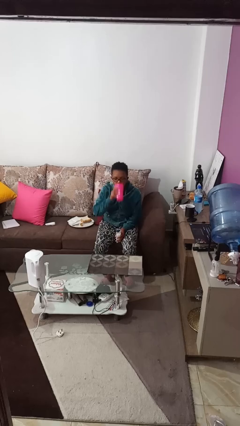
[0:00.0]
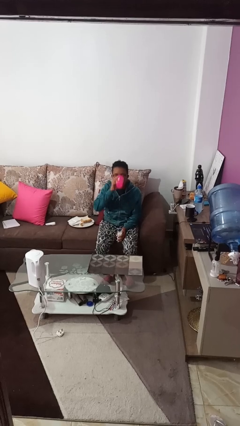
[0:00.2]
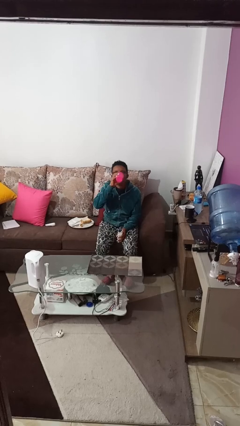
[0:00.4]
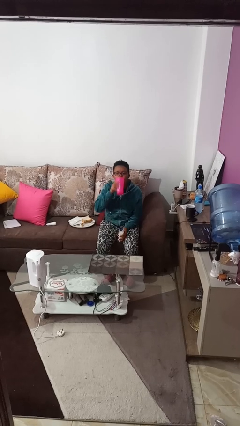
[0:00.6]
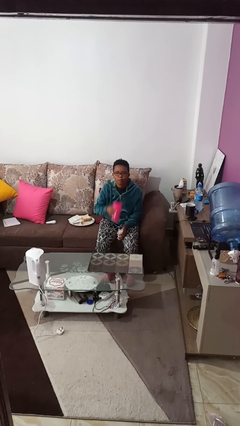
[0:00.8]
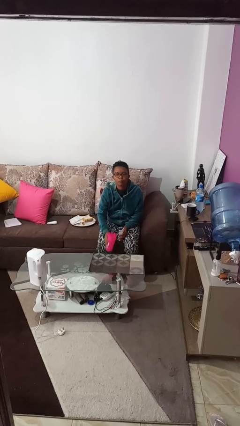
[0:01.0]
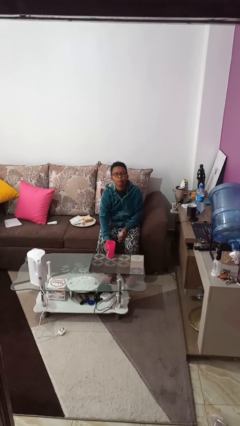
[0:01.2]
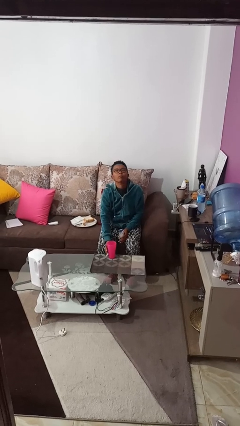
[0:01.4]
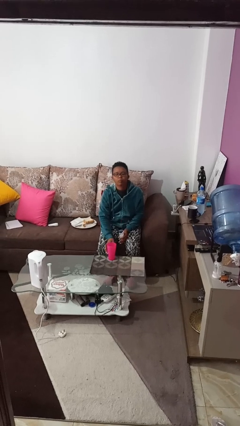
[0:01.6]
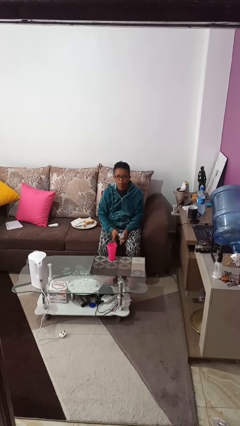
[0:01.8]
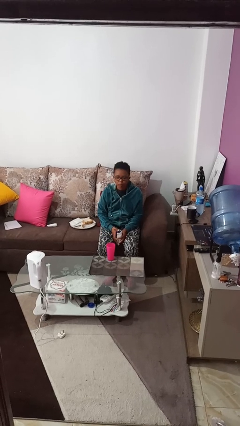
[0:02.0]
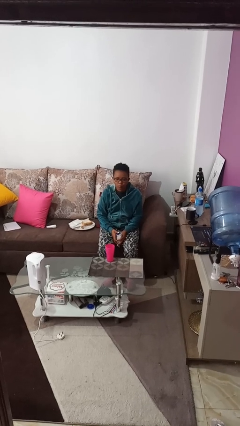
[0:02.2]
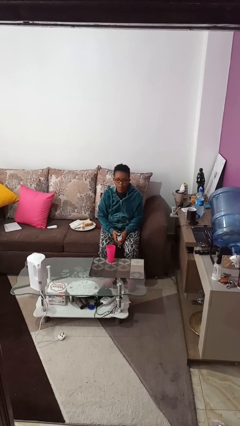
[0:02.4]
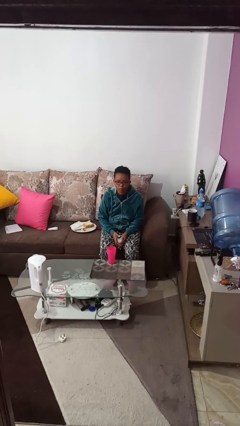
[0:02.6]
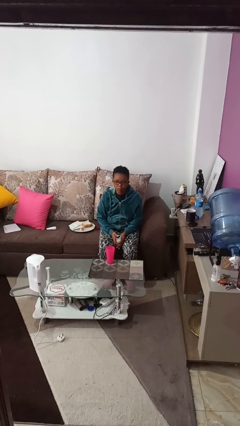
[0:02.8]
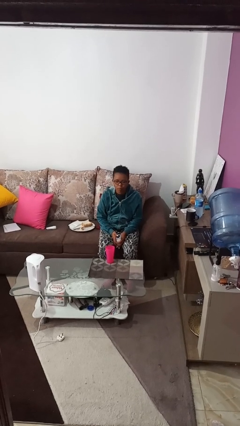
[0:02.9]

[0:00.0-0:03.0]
person drinks from cup

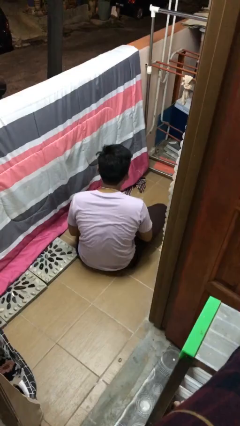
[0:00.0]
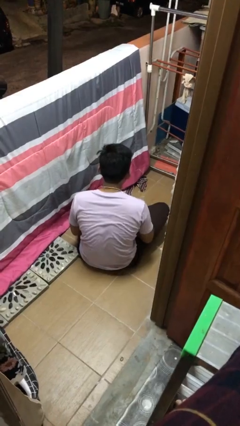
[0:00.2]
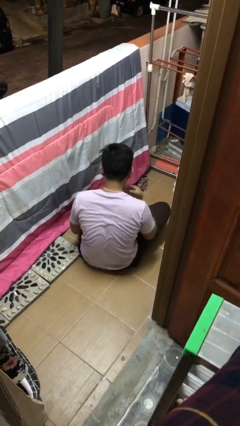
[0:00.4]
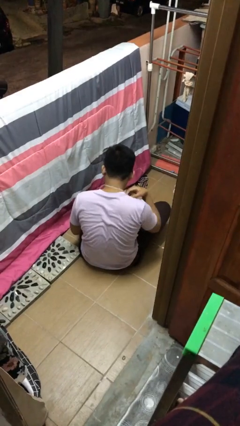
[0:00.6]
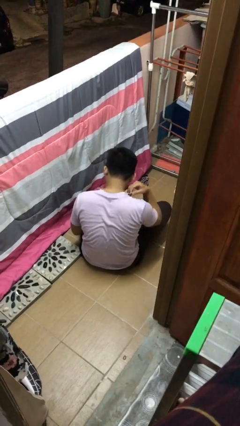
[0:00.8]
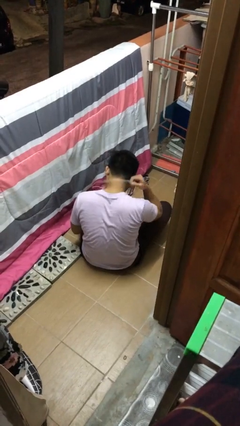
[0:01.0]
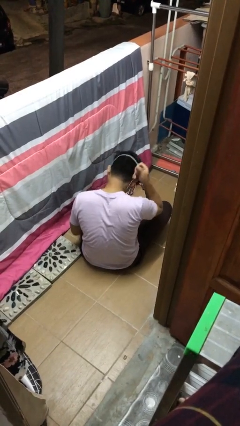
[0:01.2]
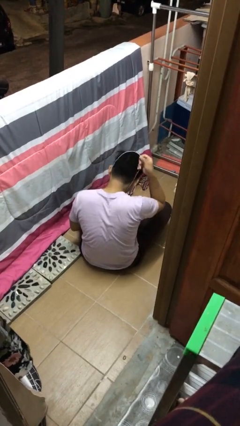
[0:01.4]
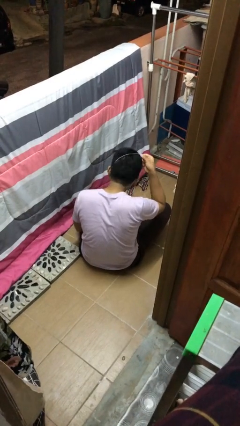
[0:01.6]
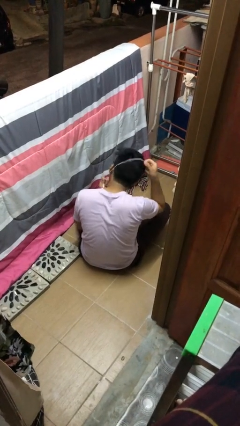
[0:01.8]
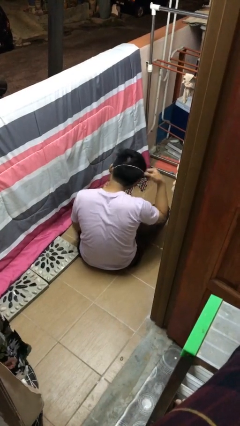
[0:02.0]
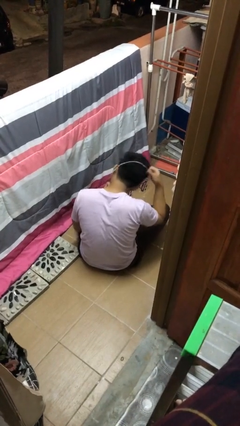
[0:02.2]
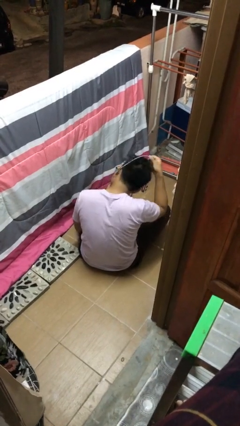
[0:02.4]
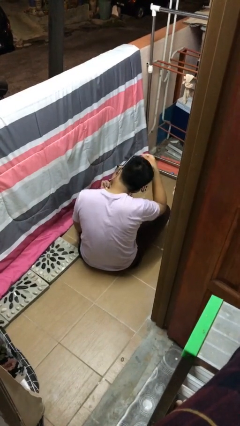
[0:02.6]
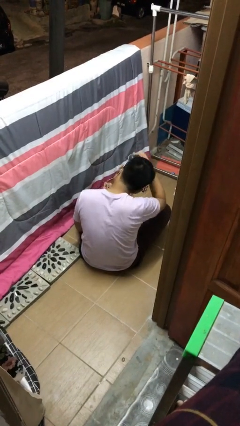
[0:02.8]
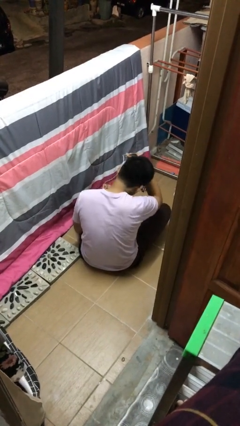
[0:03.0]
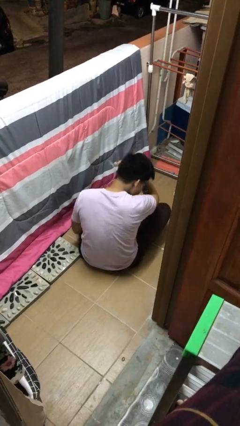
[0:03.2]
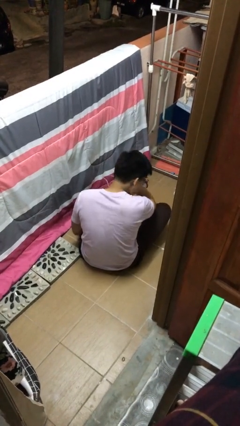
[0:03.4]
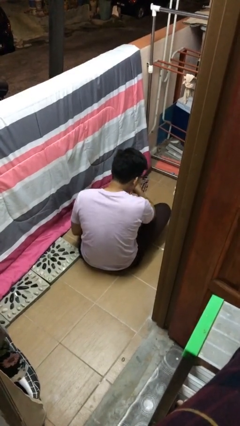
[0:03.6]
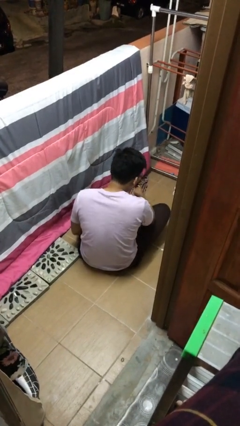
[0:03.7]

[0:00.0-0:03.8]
person takes off necklace

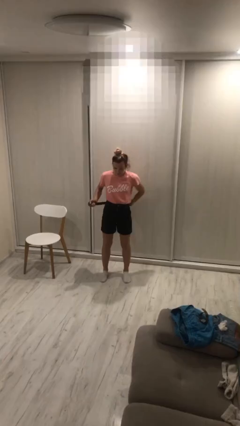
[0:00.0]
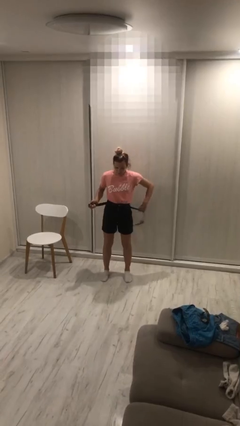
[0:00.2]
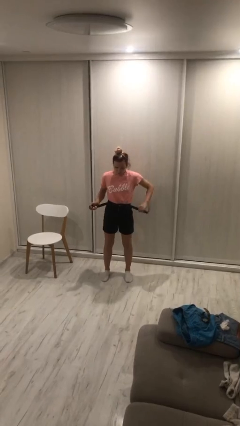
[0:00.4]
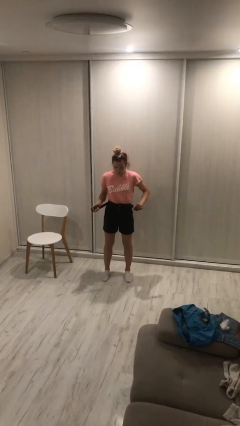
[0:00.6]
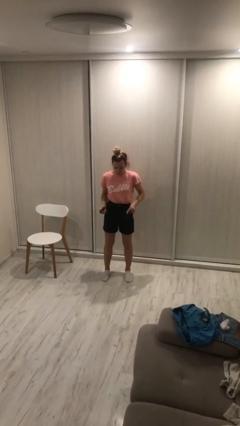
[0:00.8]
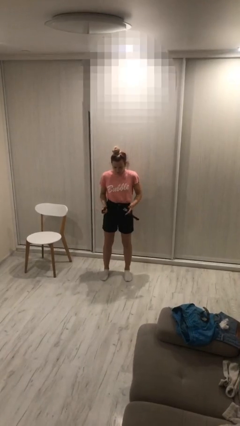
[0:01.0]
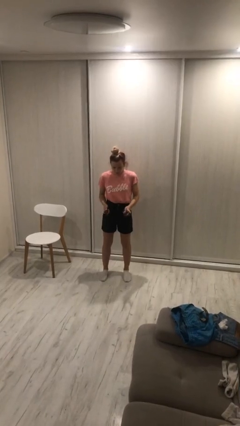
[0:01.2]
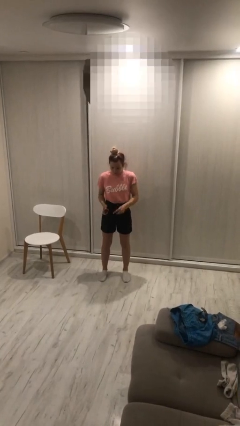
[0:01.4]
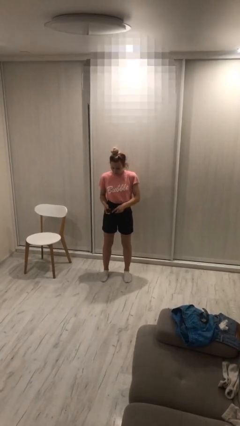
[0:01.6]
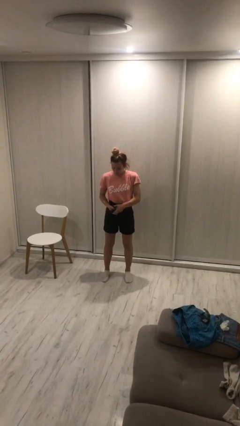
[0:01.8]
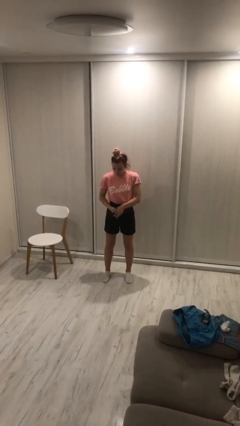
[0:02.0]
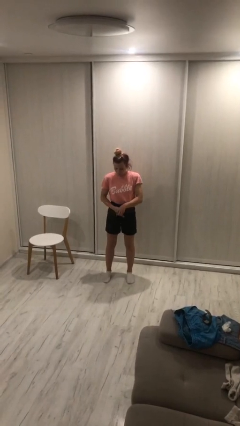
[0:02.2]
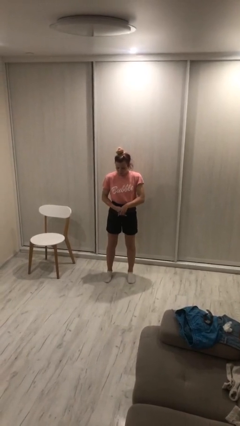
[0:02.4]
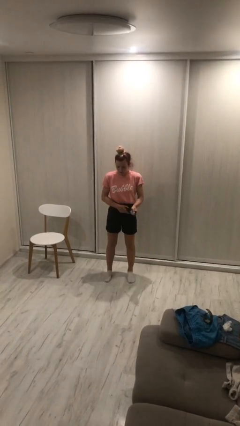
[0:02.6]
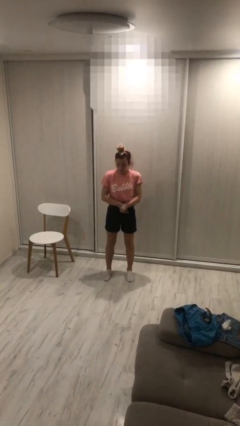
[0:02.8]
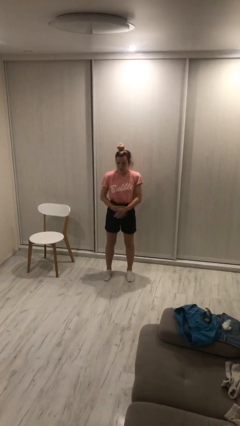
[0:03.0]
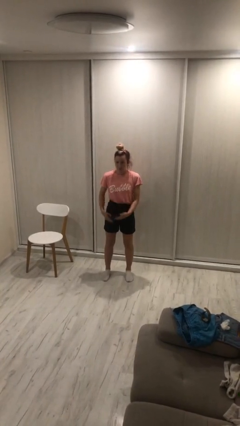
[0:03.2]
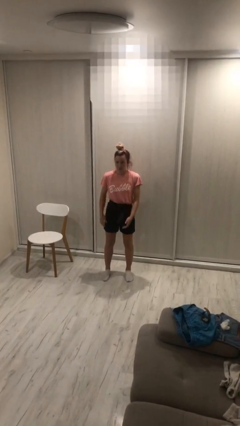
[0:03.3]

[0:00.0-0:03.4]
person puts on belt

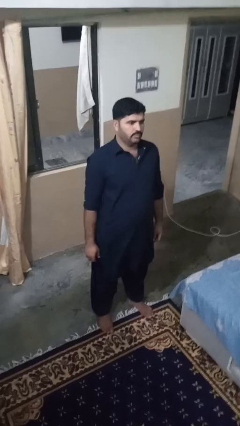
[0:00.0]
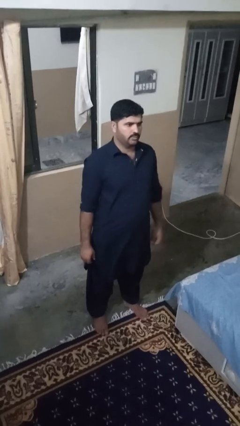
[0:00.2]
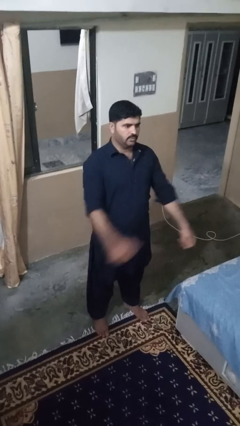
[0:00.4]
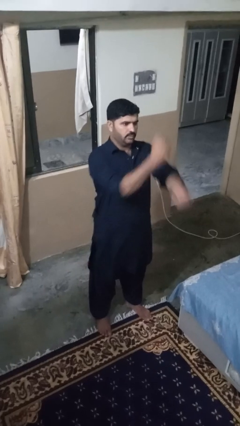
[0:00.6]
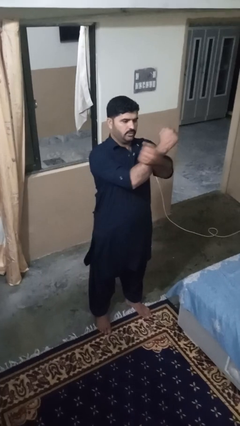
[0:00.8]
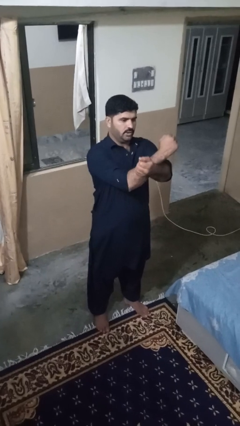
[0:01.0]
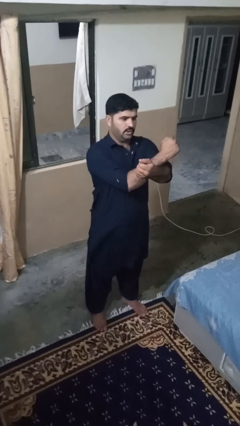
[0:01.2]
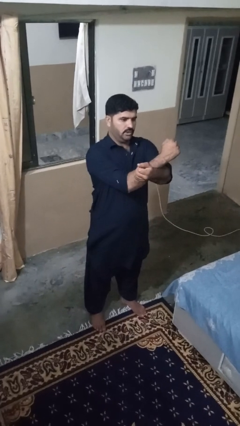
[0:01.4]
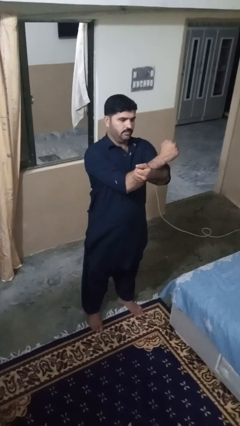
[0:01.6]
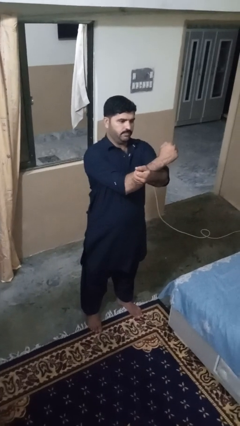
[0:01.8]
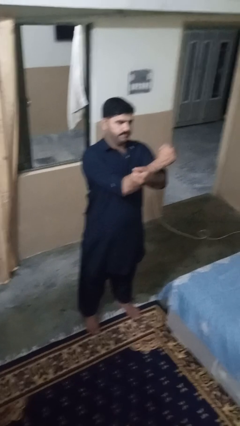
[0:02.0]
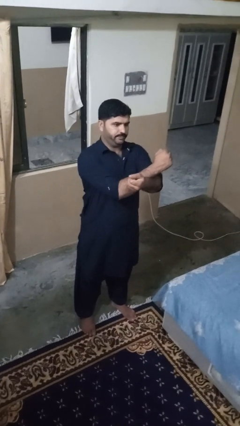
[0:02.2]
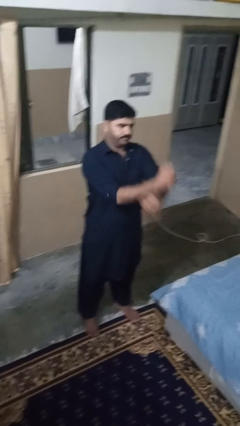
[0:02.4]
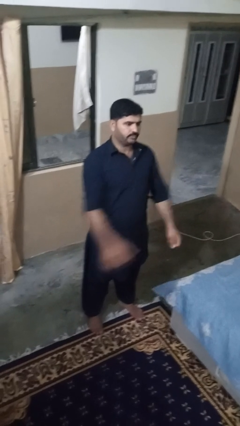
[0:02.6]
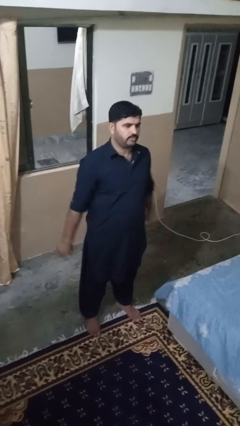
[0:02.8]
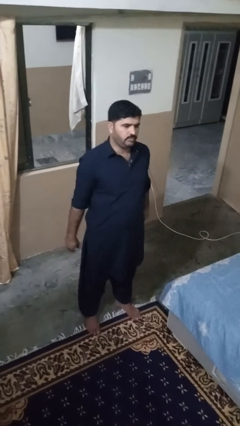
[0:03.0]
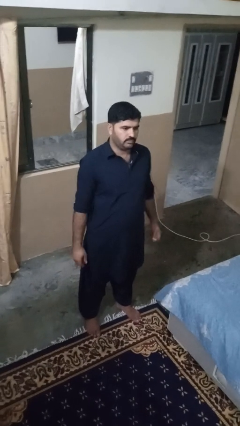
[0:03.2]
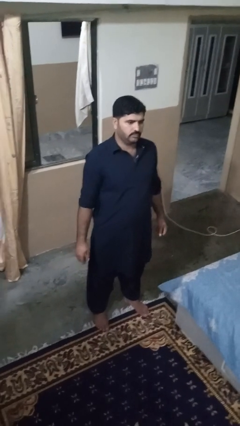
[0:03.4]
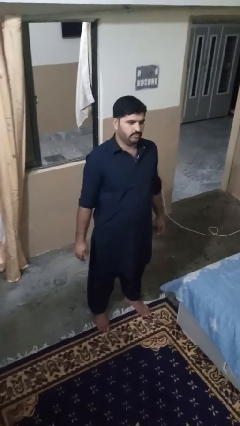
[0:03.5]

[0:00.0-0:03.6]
person crosses arms

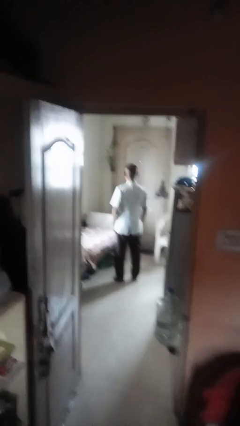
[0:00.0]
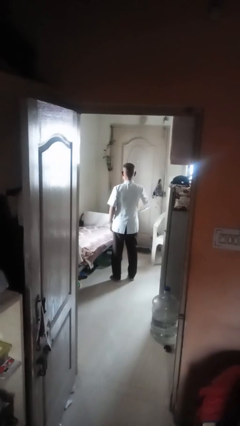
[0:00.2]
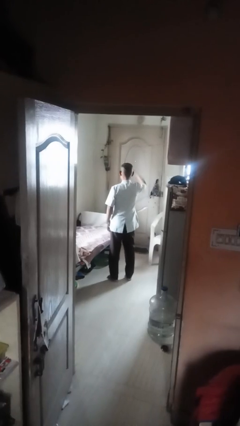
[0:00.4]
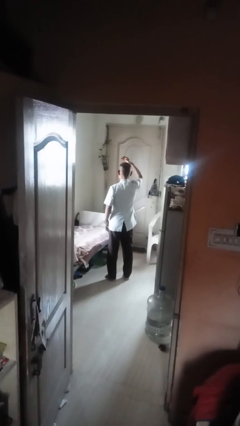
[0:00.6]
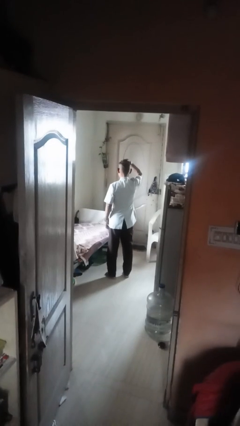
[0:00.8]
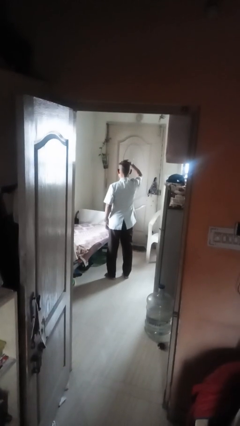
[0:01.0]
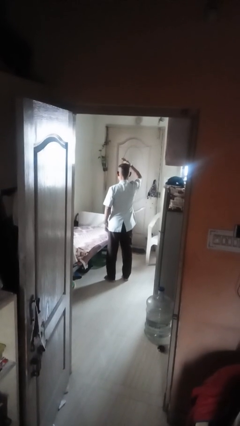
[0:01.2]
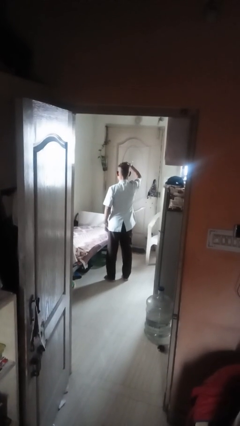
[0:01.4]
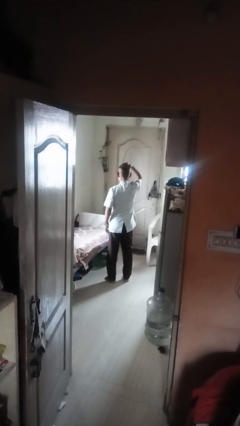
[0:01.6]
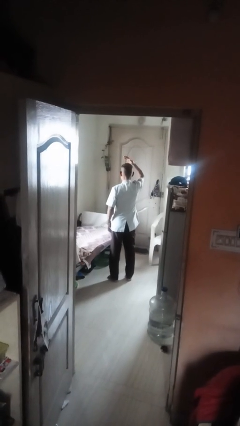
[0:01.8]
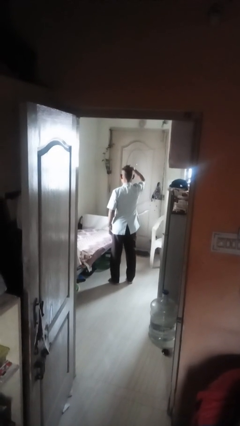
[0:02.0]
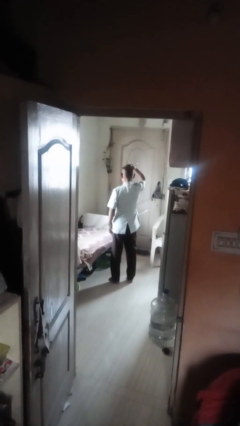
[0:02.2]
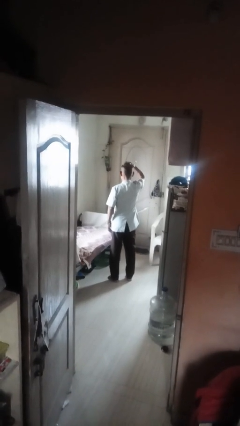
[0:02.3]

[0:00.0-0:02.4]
person pats head

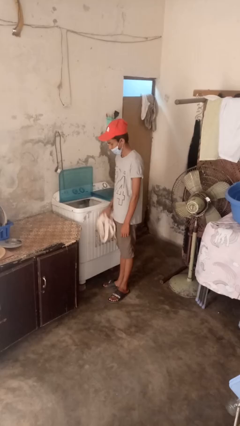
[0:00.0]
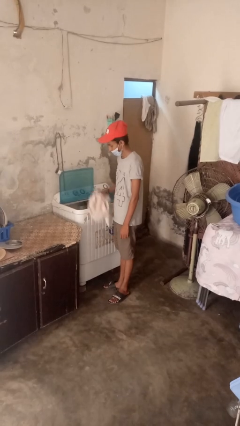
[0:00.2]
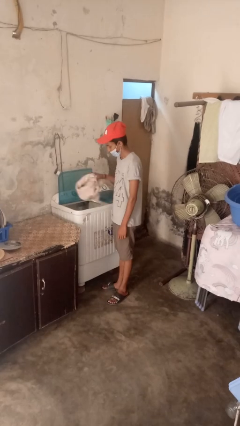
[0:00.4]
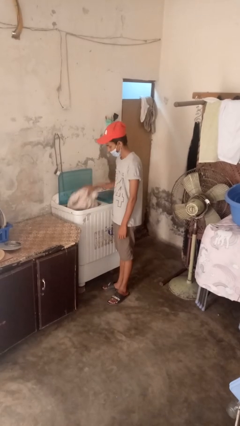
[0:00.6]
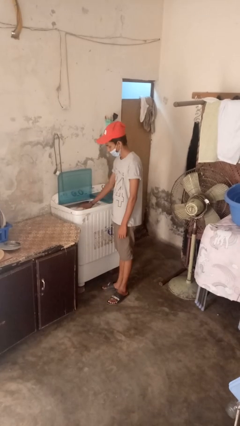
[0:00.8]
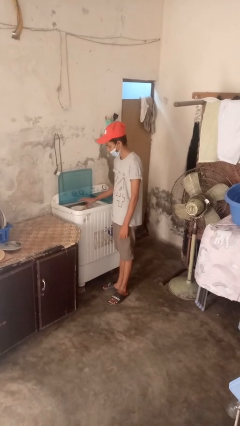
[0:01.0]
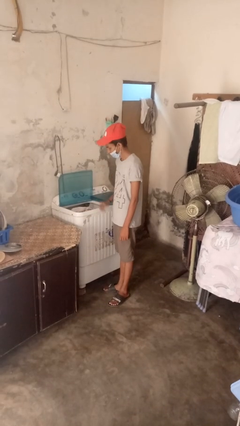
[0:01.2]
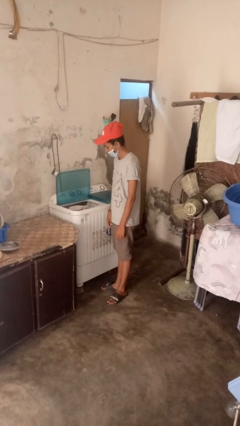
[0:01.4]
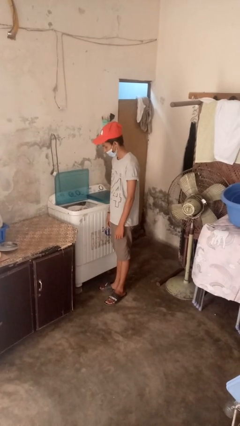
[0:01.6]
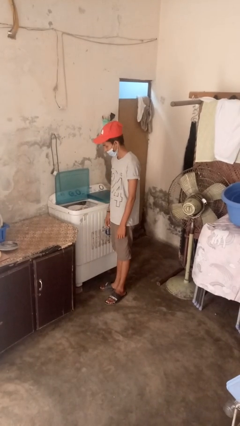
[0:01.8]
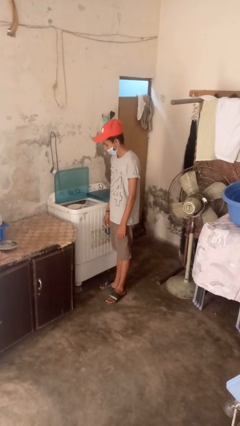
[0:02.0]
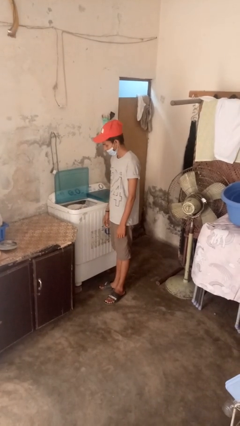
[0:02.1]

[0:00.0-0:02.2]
person loads dryer
